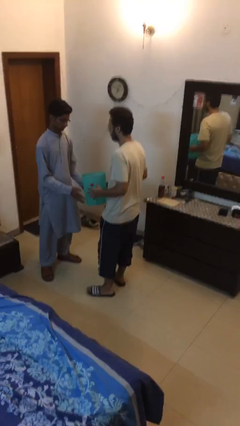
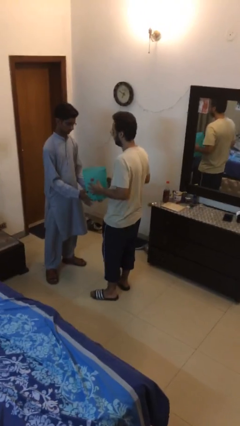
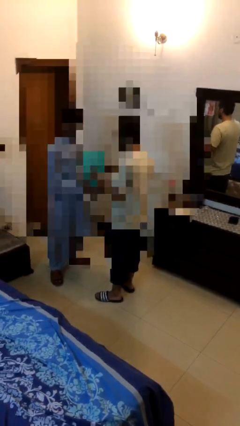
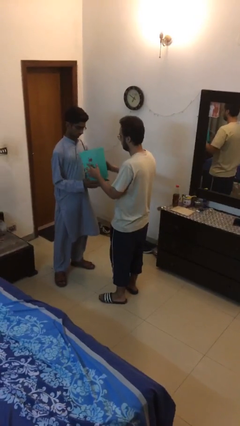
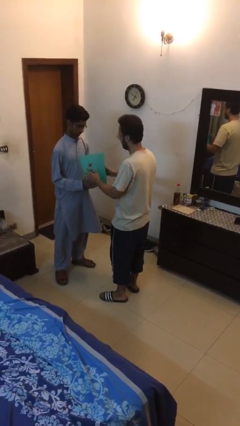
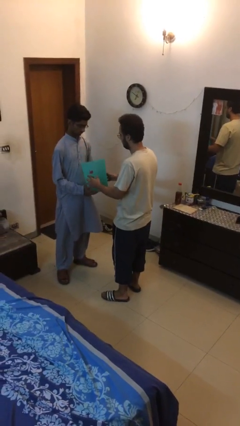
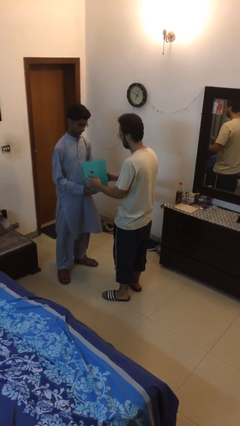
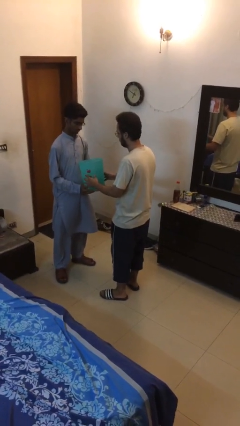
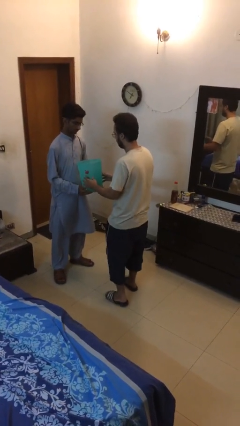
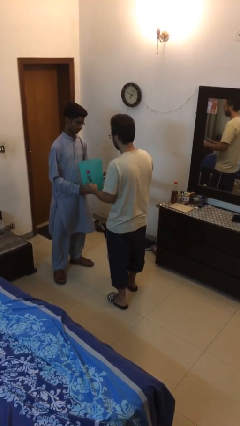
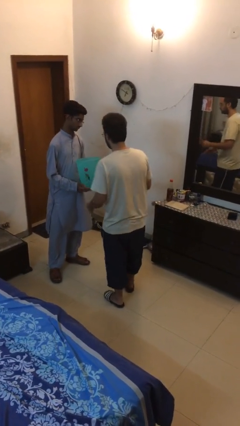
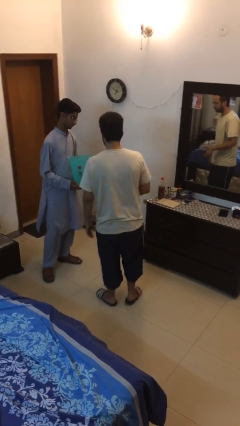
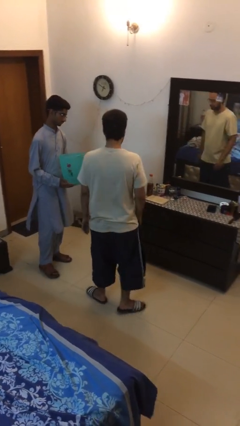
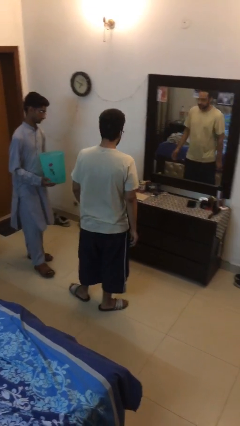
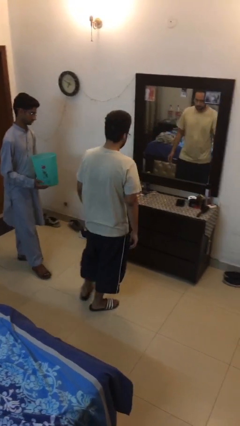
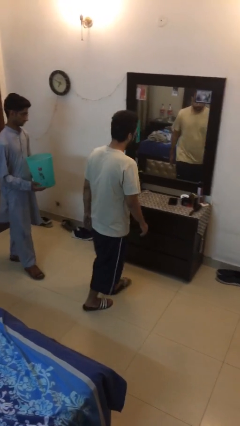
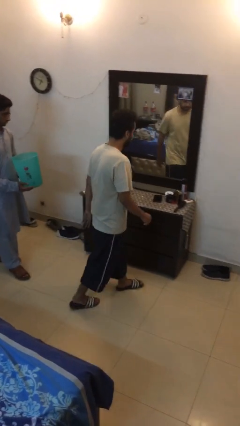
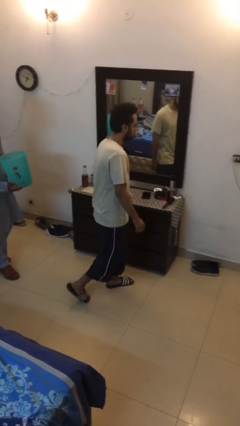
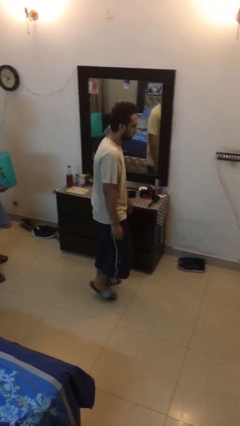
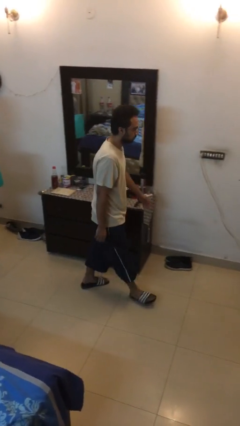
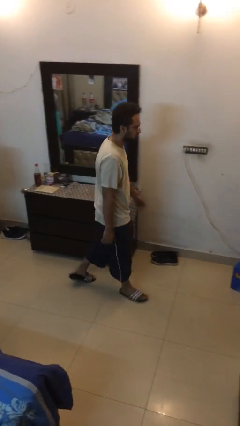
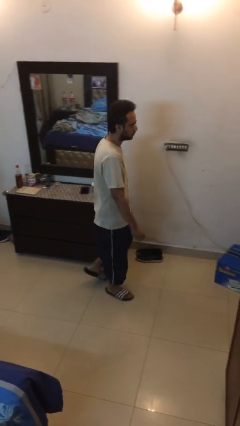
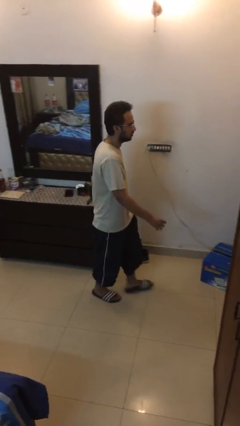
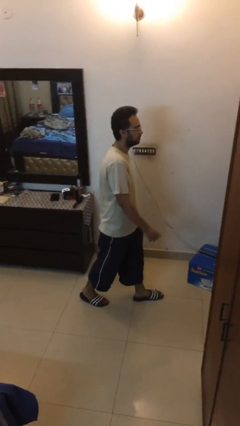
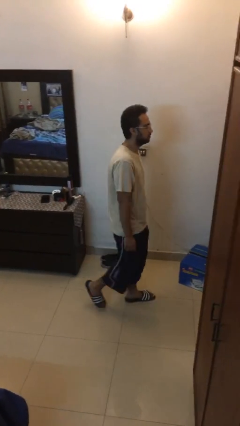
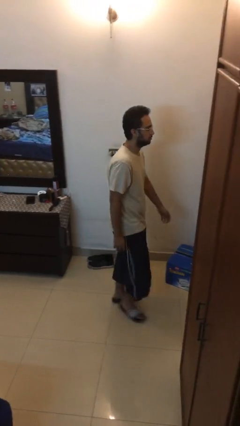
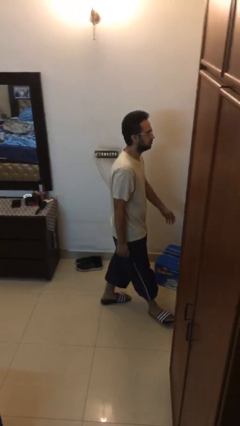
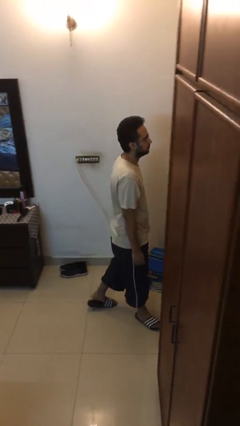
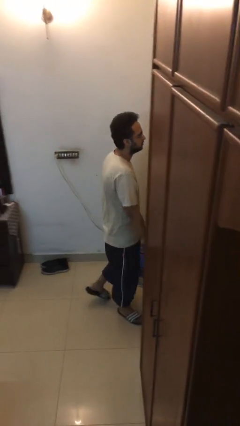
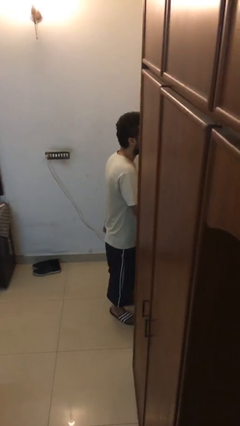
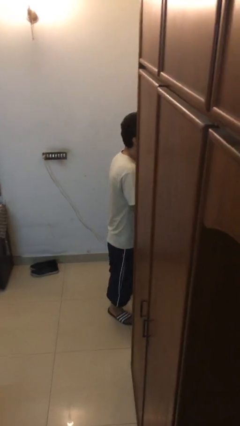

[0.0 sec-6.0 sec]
person transfers object to person

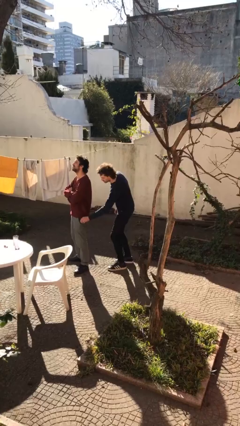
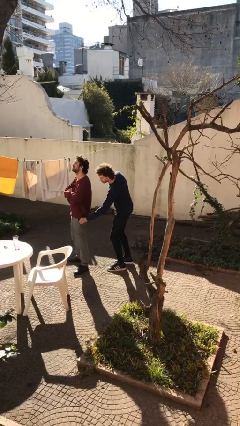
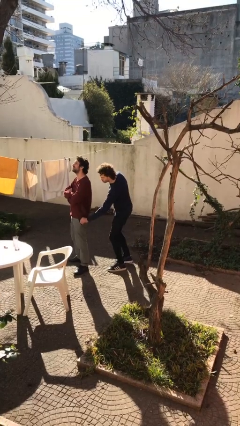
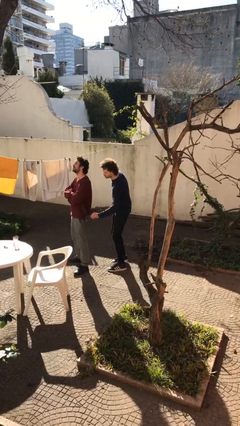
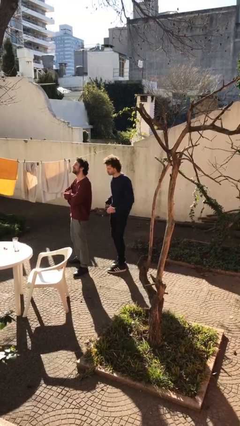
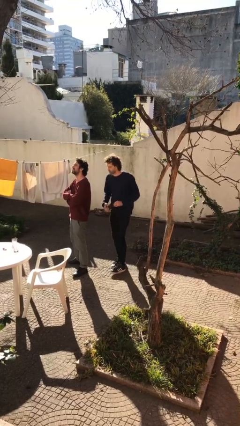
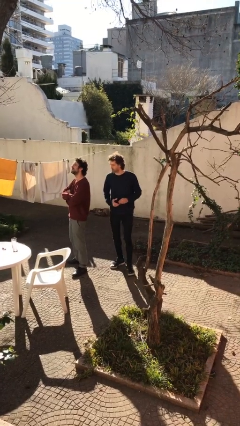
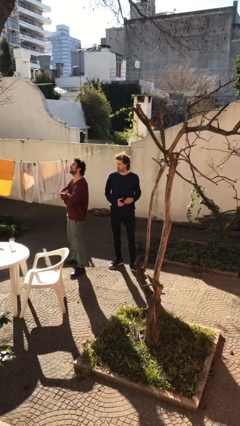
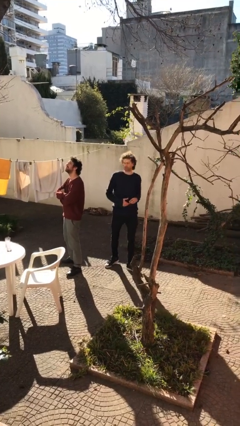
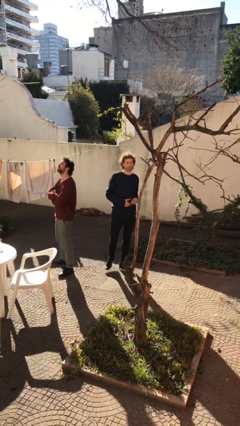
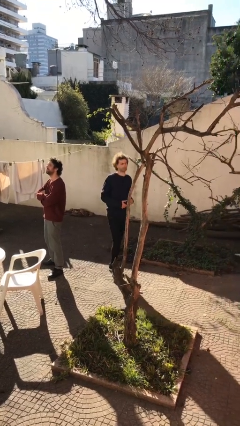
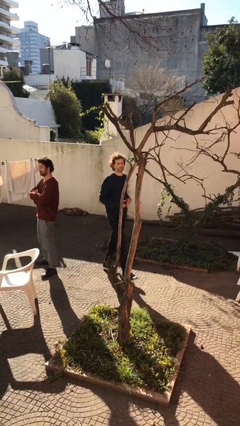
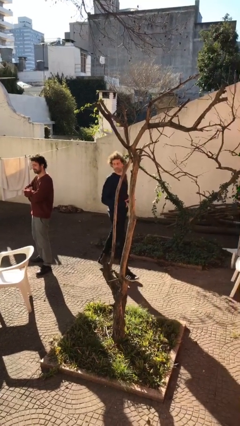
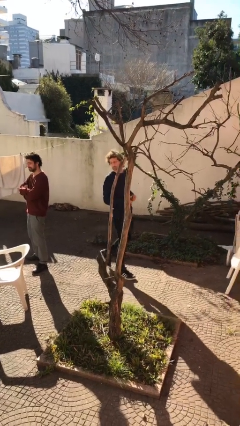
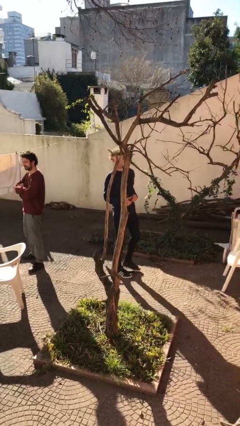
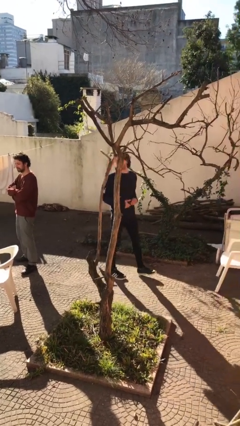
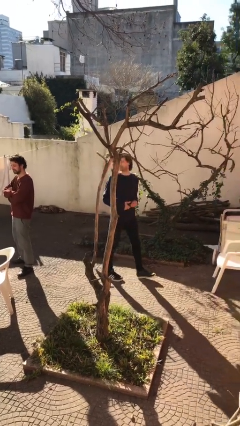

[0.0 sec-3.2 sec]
person steals object from person

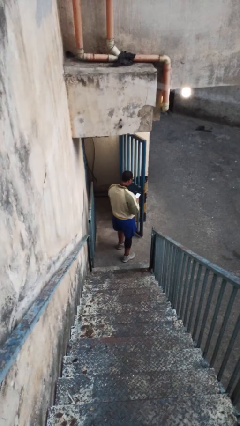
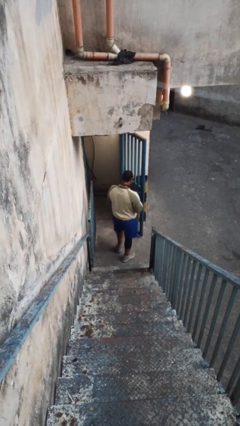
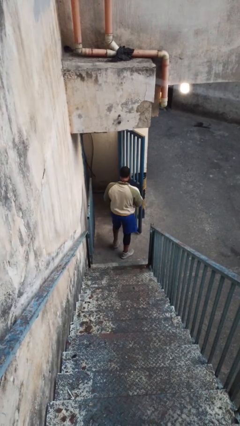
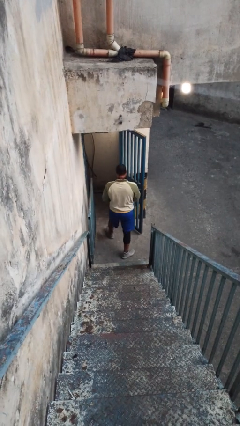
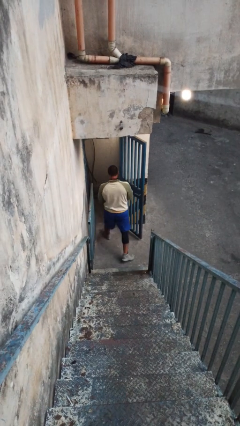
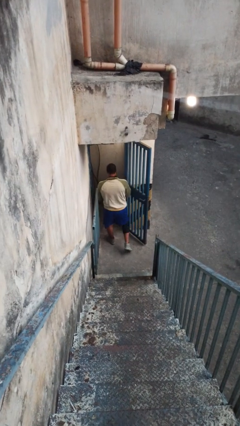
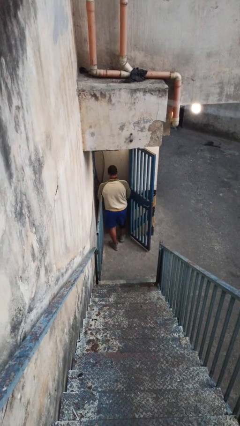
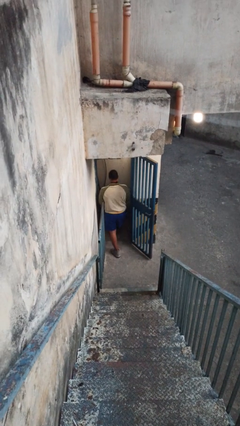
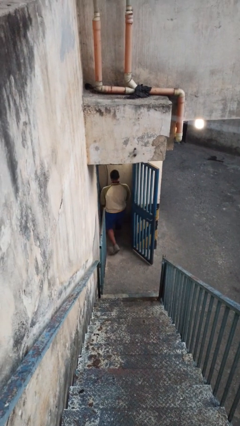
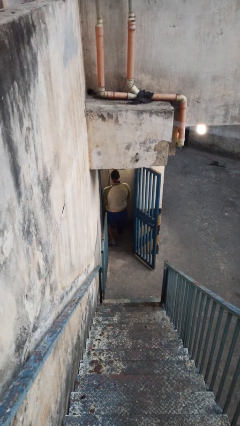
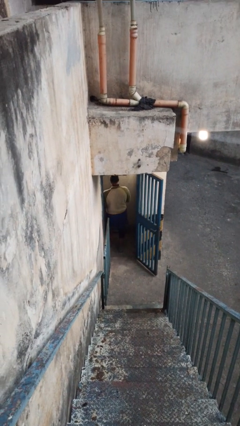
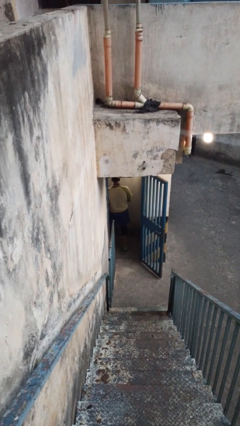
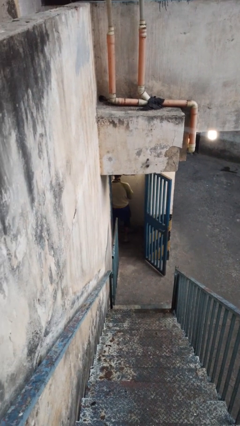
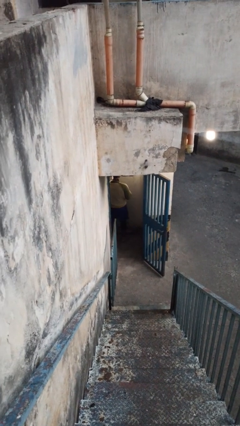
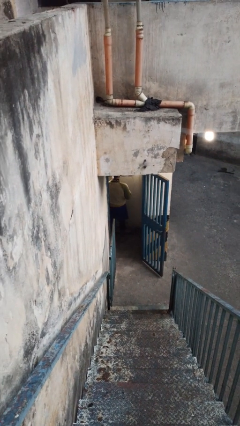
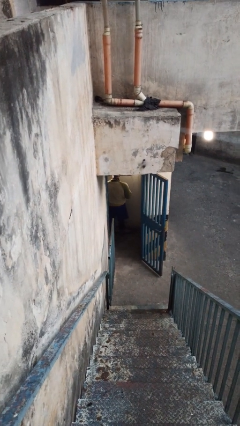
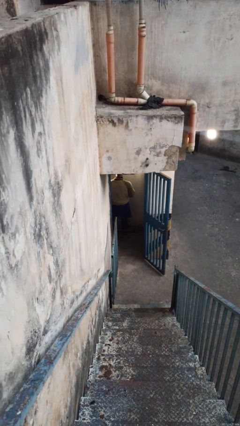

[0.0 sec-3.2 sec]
person exits scene through structure

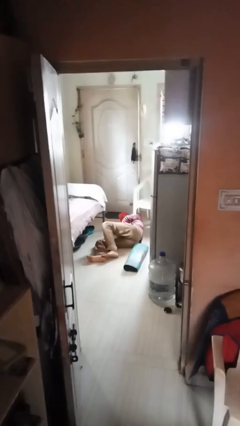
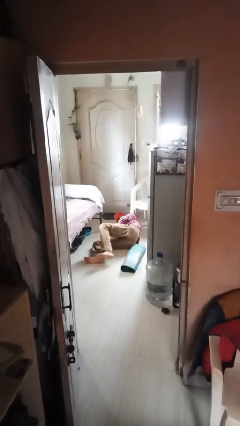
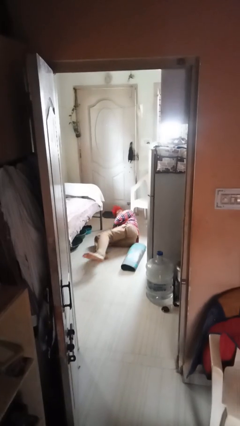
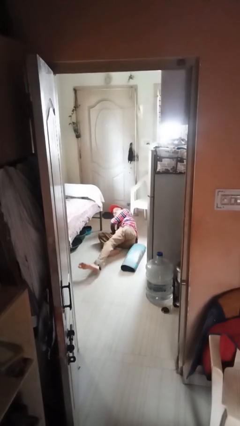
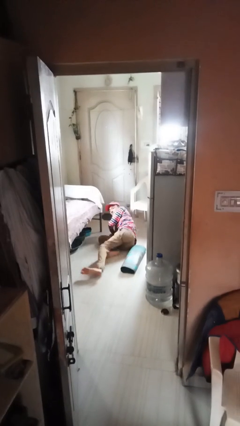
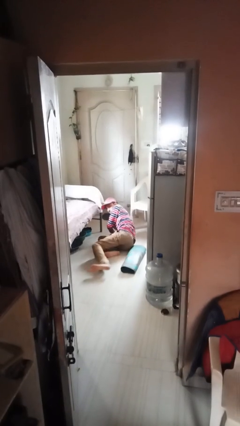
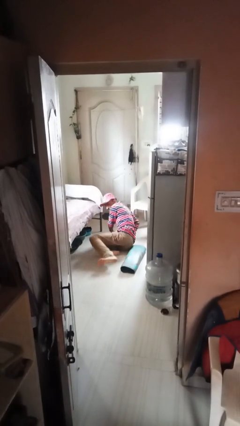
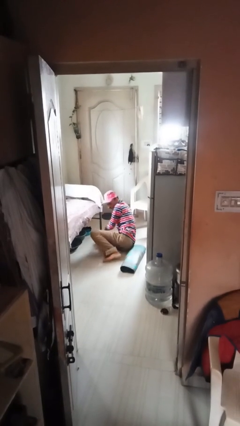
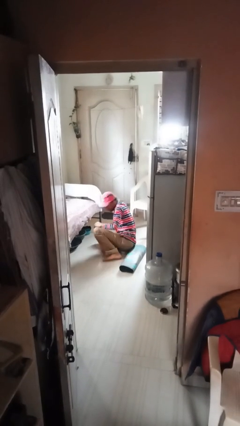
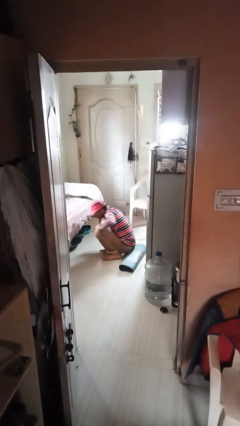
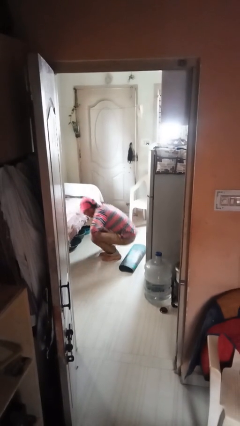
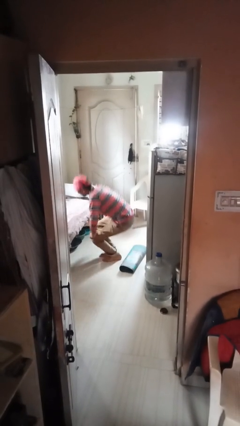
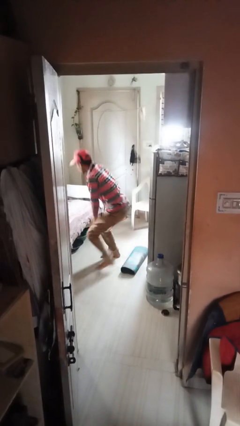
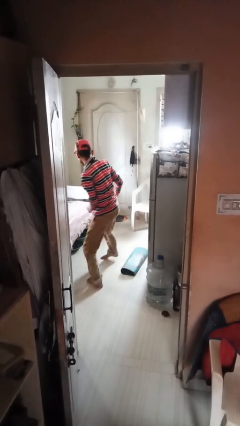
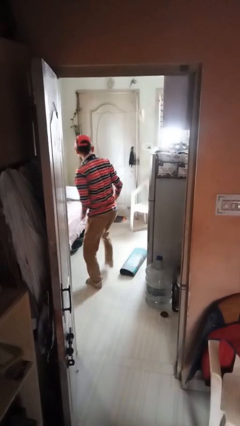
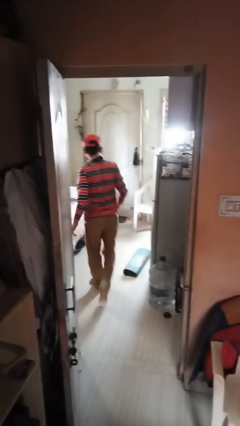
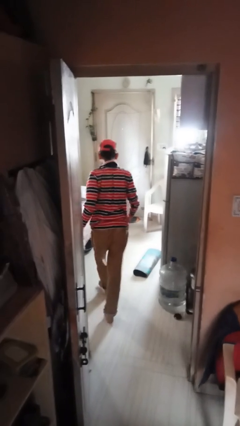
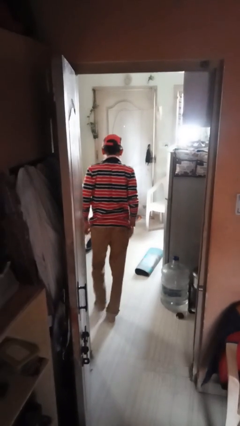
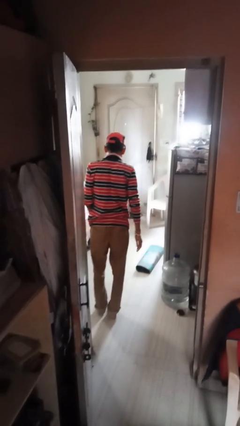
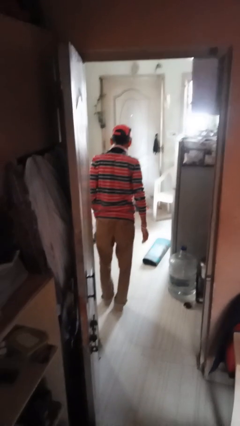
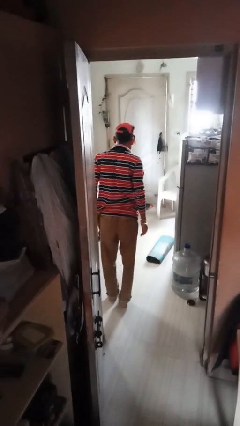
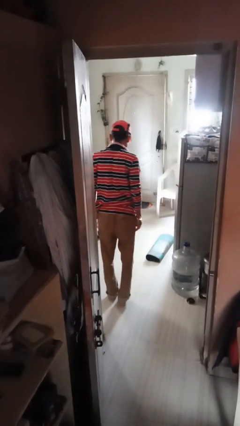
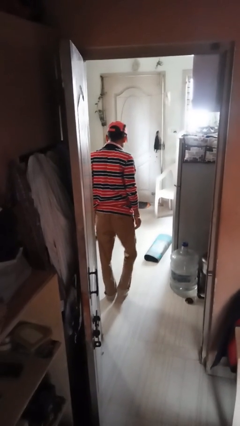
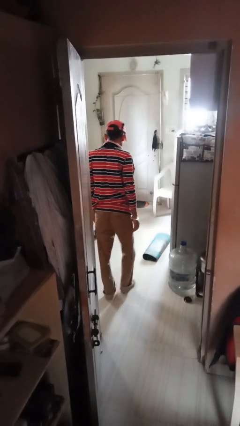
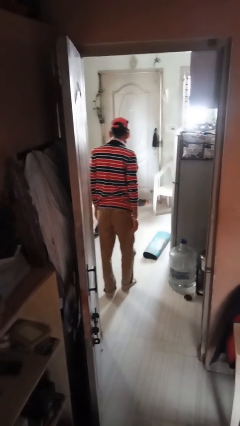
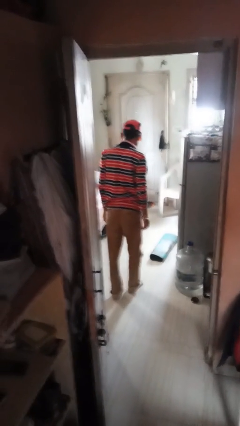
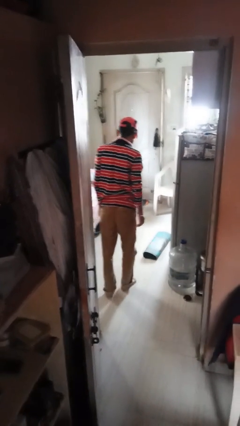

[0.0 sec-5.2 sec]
person stands up from floor

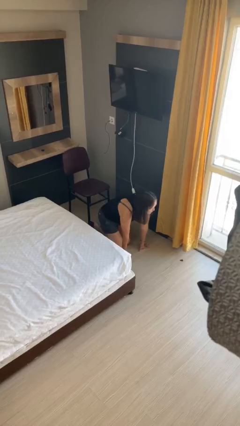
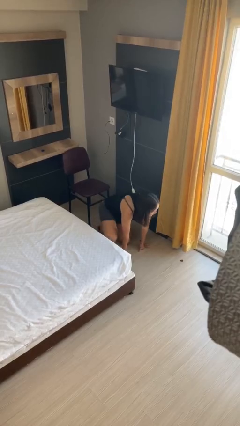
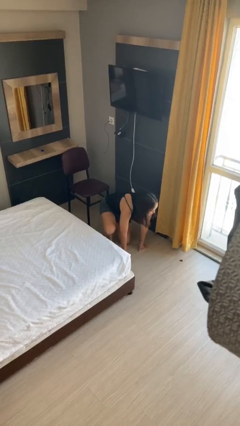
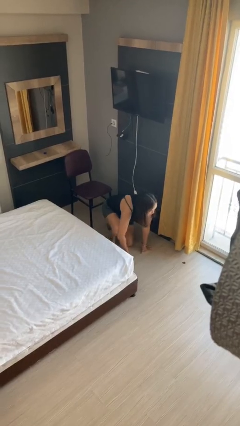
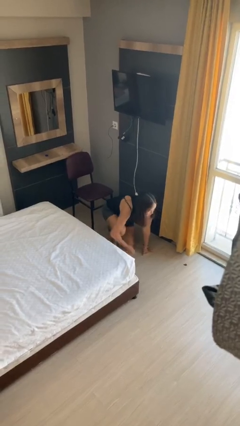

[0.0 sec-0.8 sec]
person sits down
